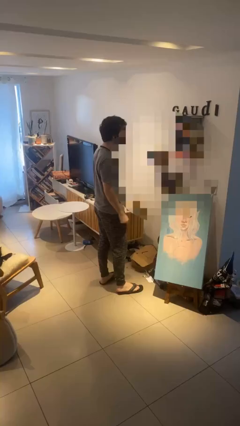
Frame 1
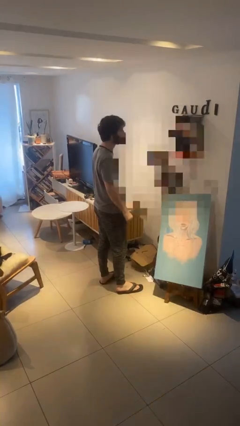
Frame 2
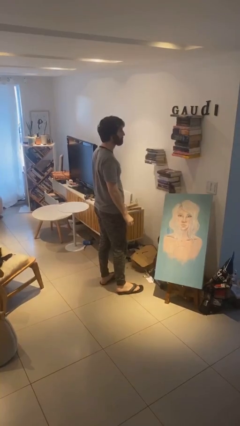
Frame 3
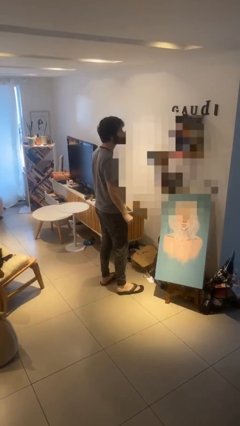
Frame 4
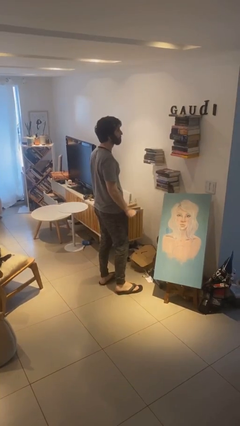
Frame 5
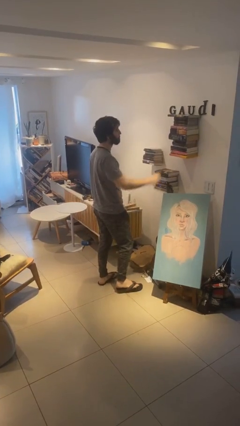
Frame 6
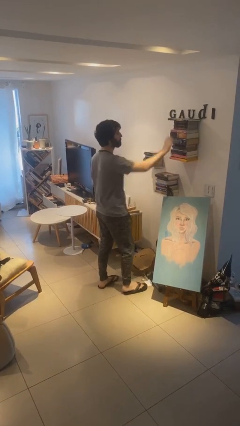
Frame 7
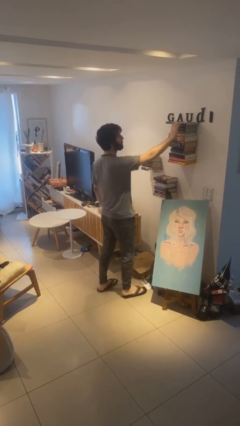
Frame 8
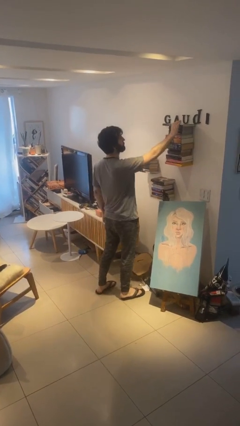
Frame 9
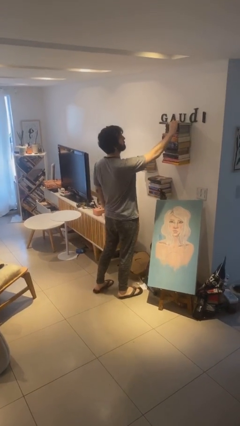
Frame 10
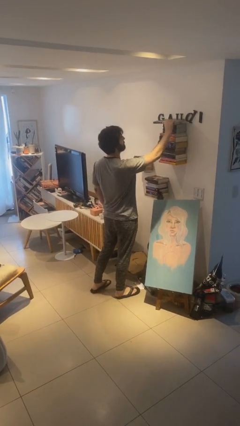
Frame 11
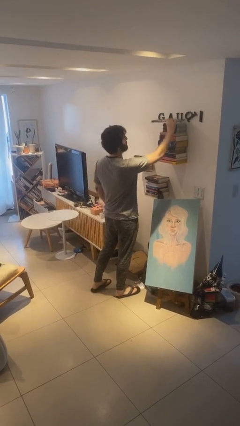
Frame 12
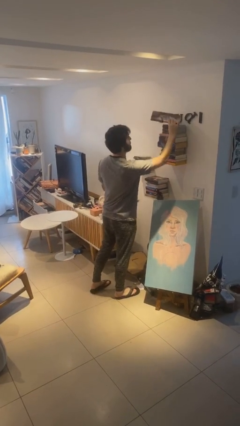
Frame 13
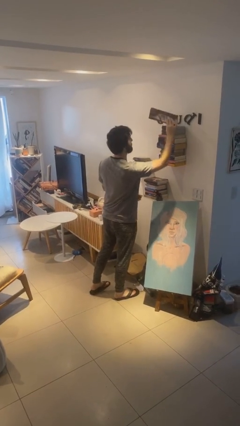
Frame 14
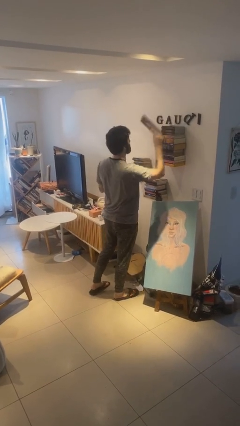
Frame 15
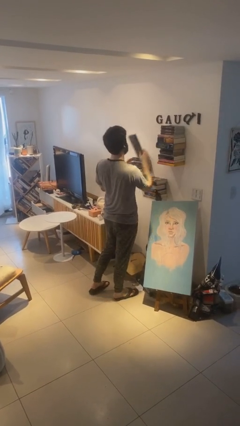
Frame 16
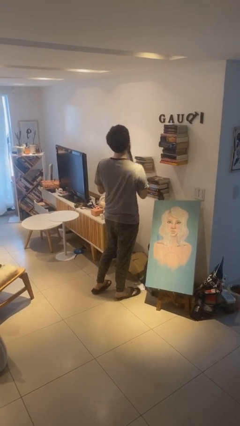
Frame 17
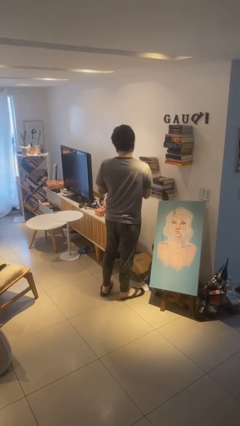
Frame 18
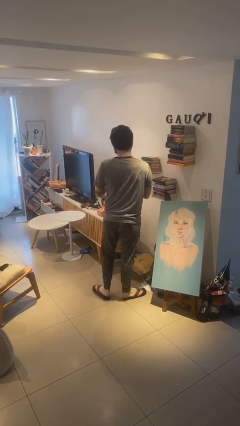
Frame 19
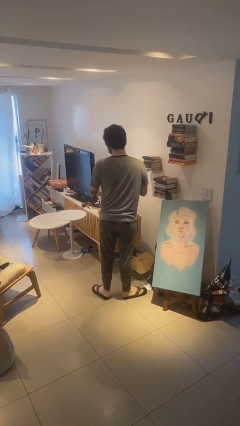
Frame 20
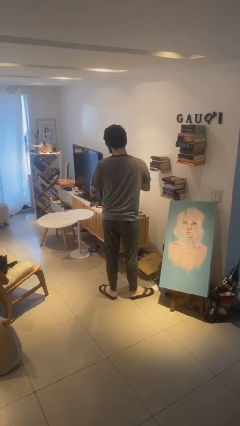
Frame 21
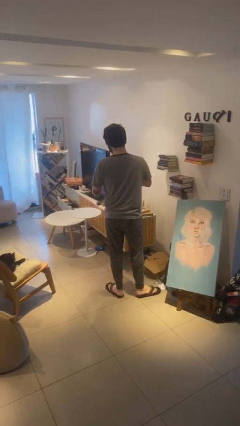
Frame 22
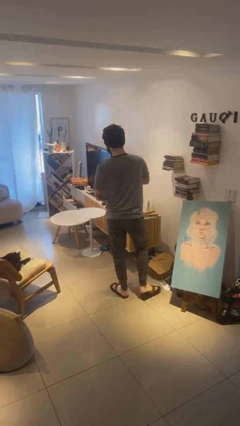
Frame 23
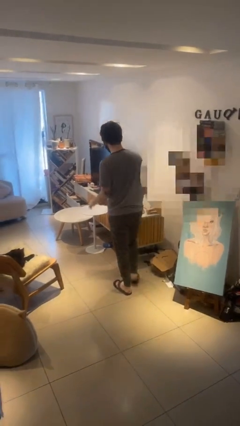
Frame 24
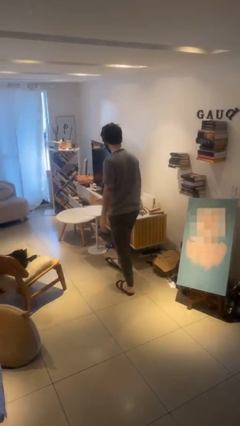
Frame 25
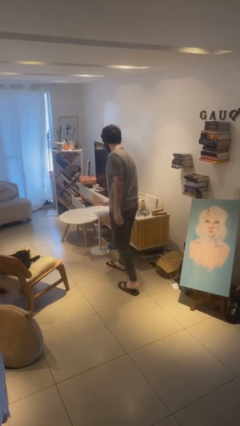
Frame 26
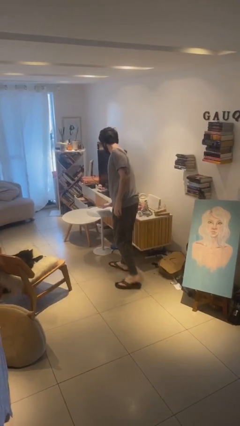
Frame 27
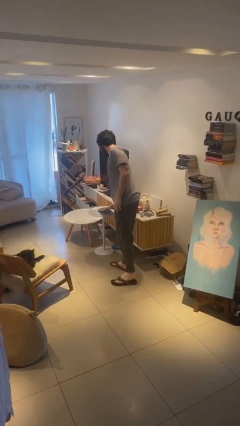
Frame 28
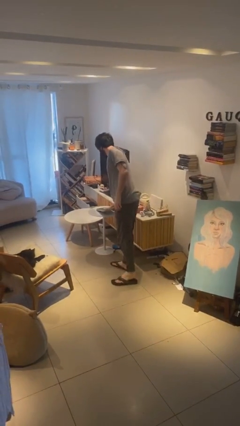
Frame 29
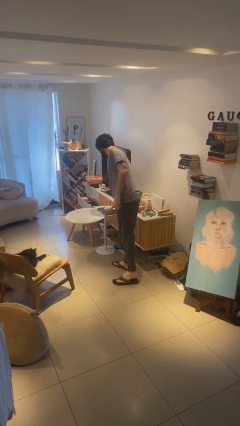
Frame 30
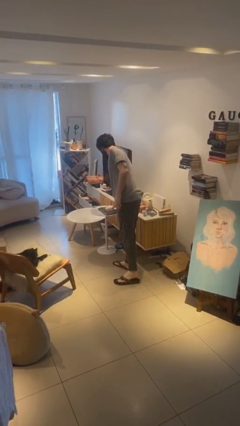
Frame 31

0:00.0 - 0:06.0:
person picks up object from shelf

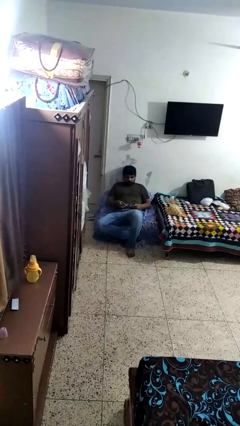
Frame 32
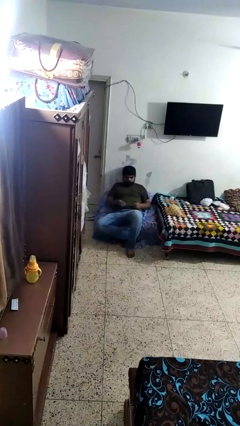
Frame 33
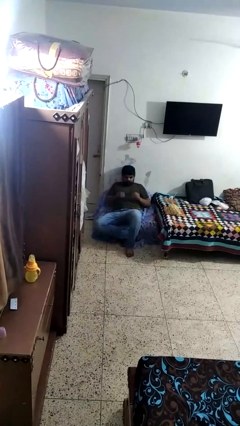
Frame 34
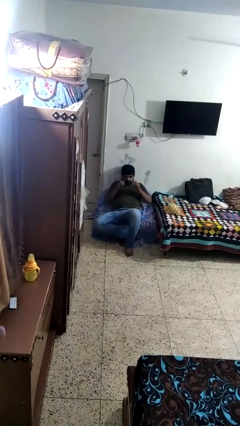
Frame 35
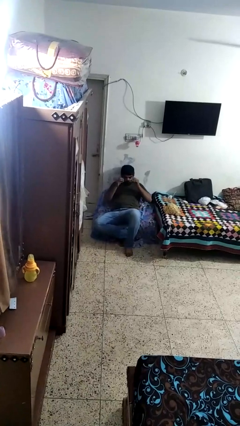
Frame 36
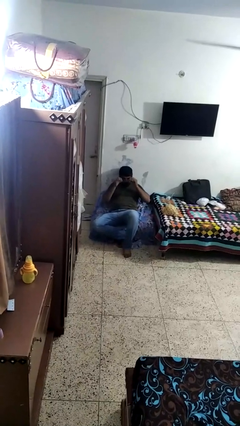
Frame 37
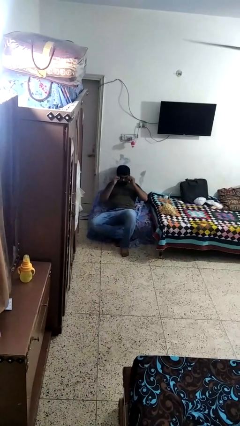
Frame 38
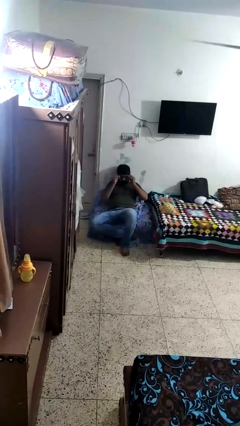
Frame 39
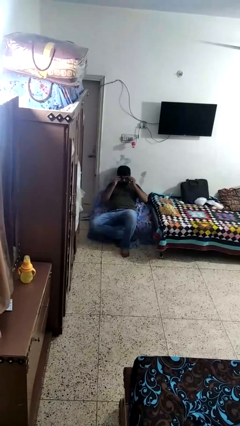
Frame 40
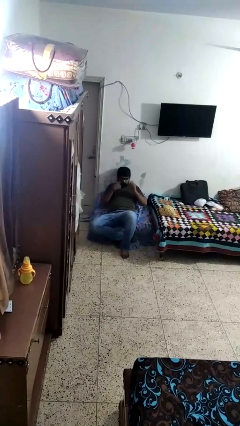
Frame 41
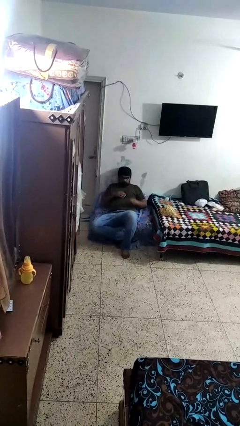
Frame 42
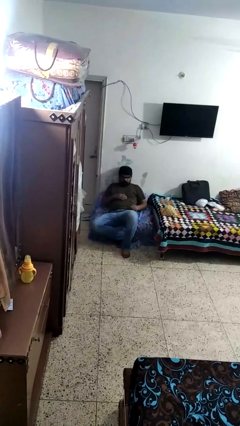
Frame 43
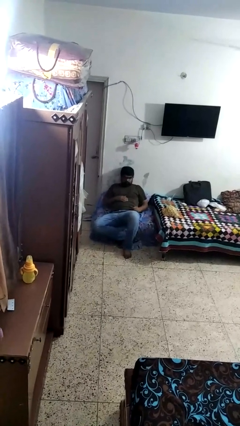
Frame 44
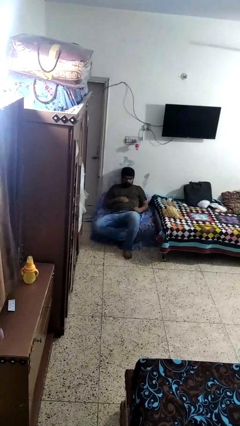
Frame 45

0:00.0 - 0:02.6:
person puts on glasses

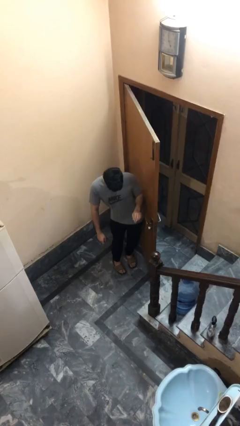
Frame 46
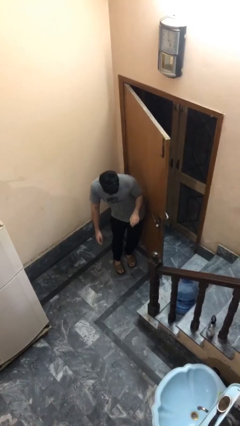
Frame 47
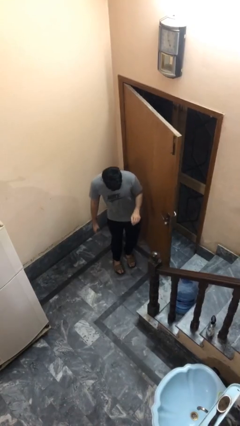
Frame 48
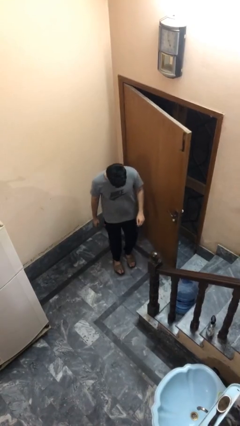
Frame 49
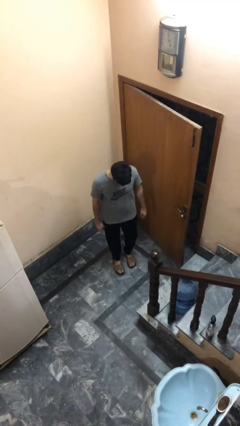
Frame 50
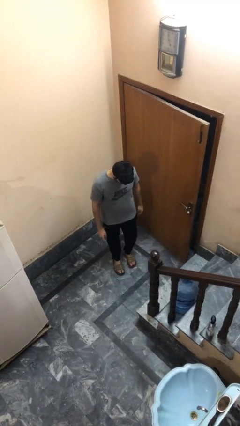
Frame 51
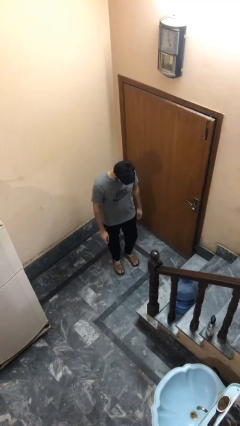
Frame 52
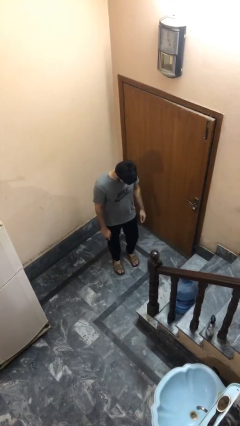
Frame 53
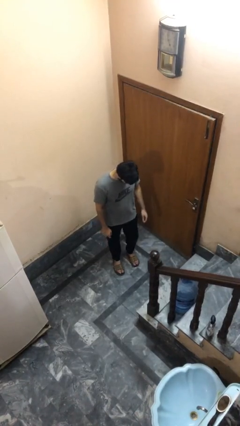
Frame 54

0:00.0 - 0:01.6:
person closes door with hip

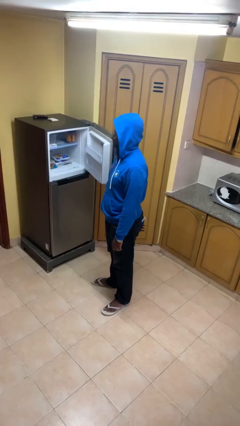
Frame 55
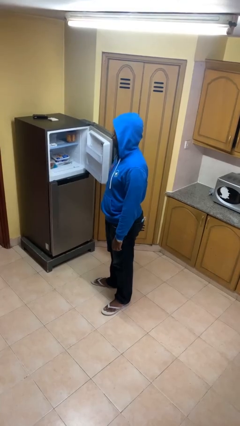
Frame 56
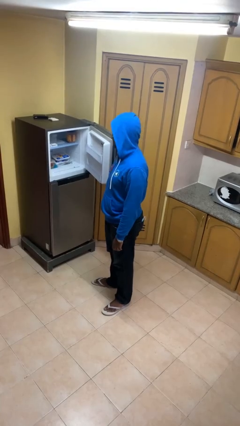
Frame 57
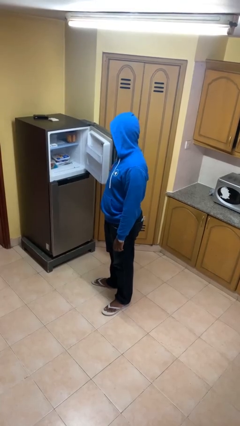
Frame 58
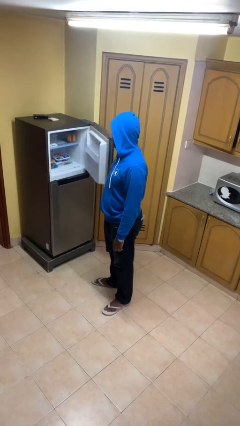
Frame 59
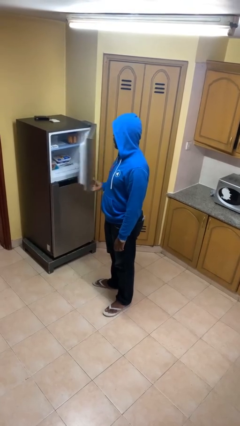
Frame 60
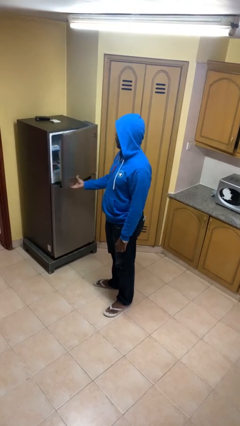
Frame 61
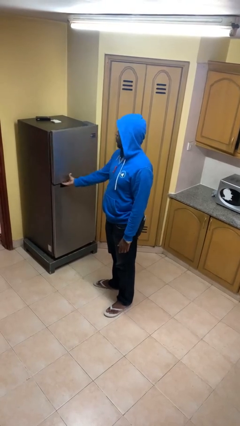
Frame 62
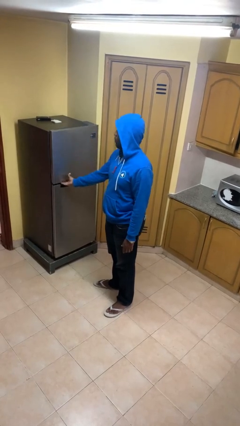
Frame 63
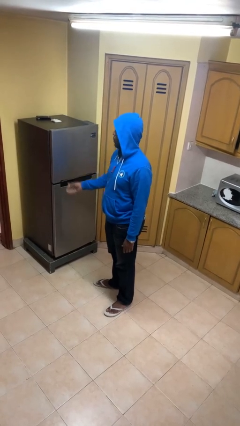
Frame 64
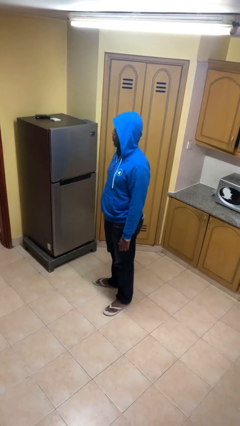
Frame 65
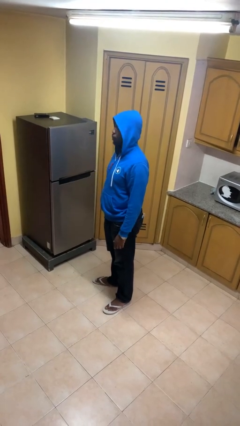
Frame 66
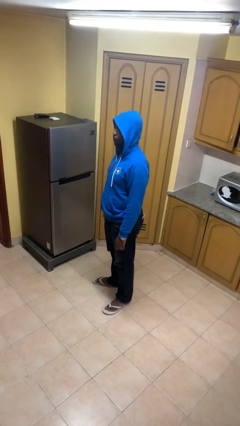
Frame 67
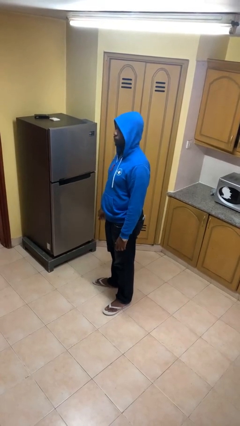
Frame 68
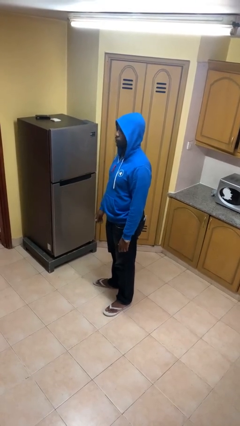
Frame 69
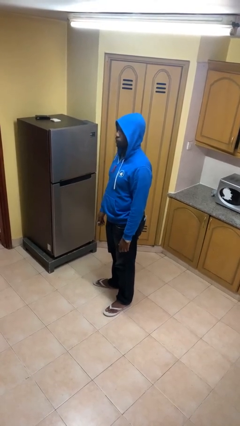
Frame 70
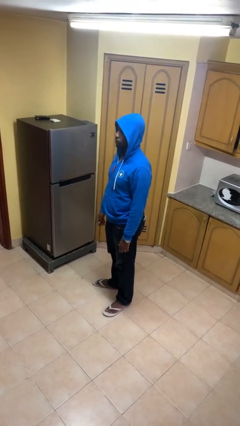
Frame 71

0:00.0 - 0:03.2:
person closes refrigerator

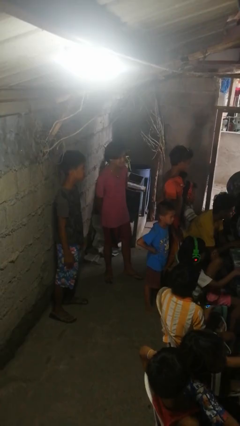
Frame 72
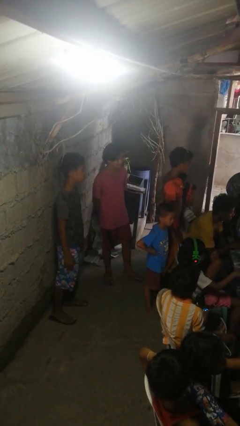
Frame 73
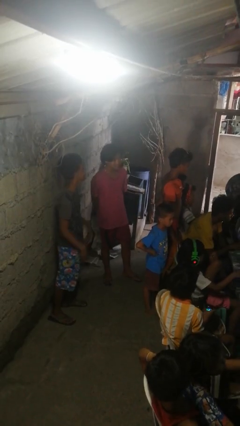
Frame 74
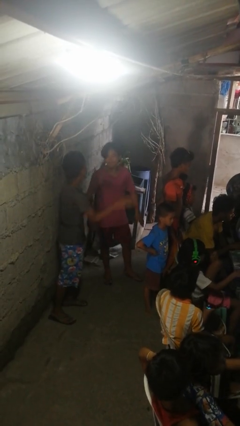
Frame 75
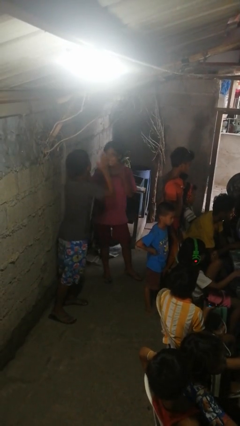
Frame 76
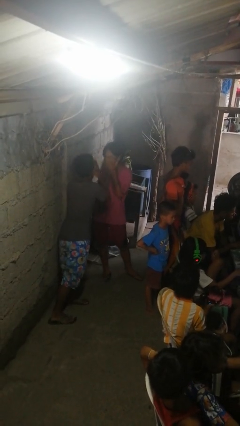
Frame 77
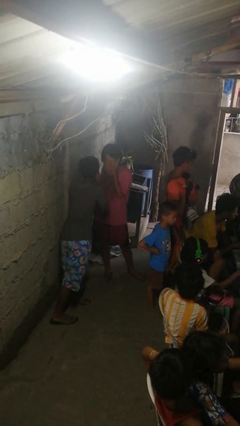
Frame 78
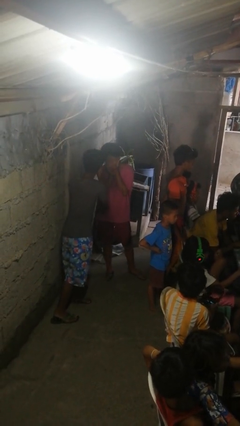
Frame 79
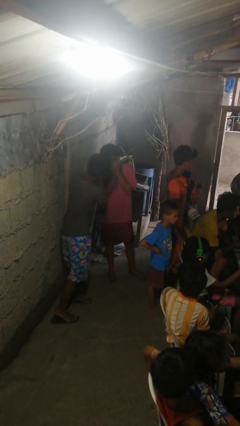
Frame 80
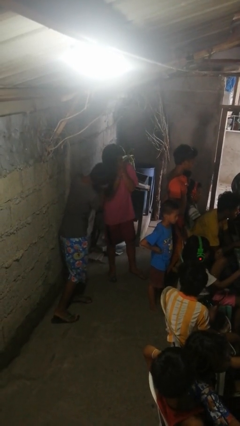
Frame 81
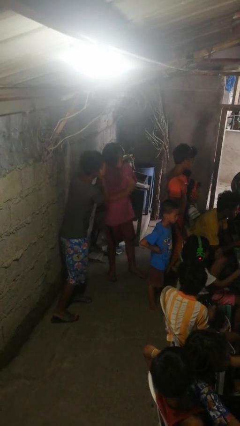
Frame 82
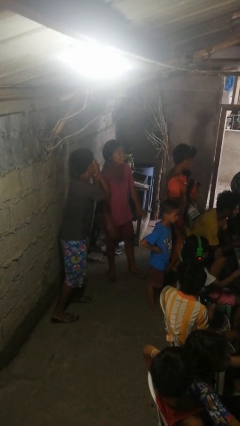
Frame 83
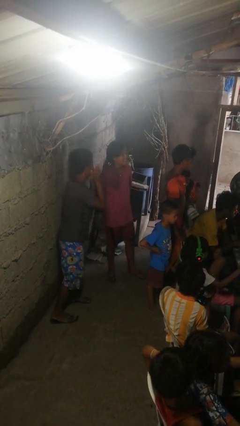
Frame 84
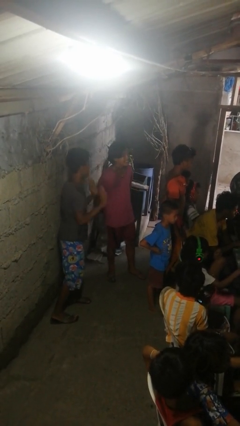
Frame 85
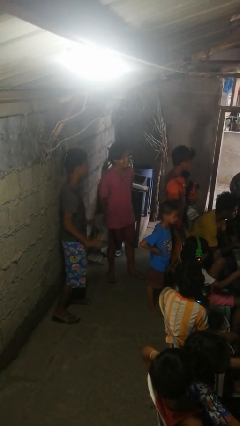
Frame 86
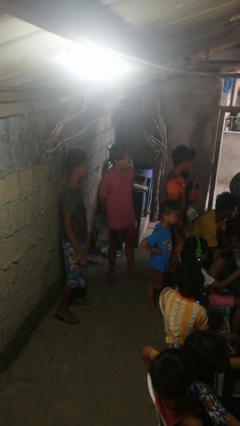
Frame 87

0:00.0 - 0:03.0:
person laughs with person

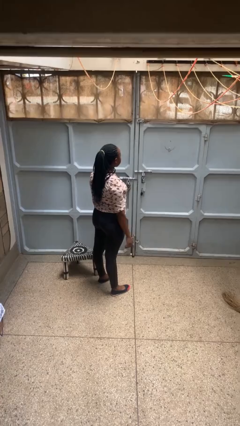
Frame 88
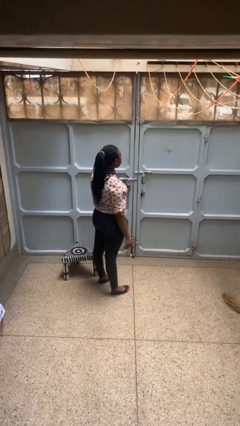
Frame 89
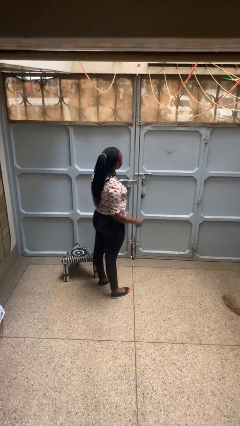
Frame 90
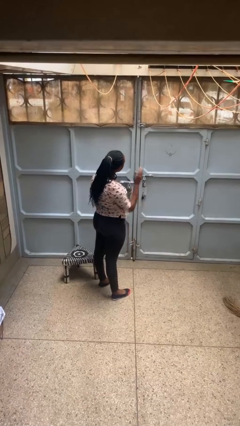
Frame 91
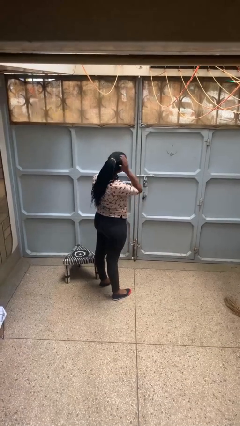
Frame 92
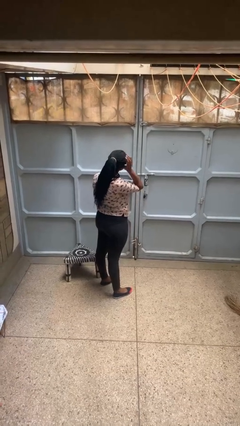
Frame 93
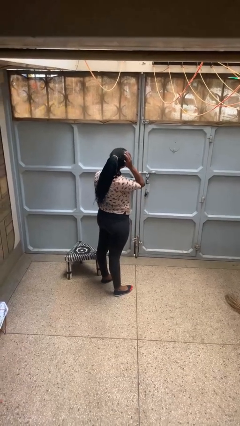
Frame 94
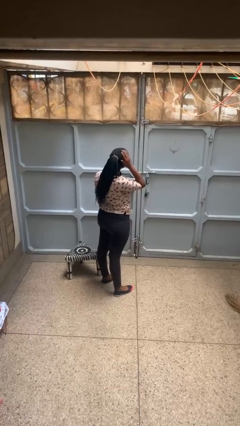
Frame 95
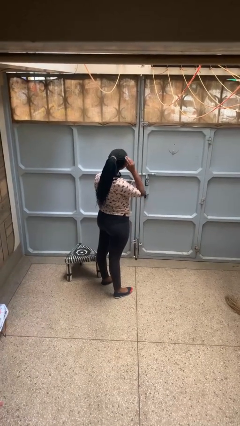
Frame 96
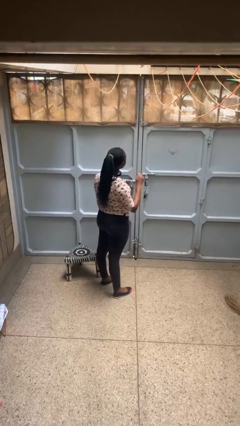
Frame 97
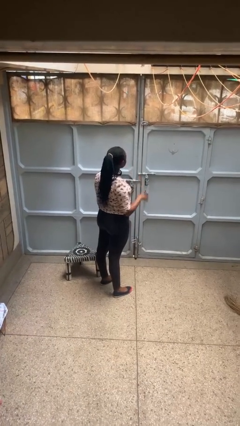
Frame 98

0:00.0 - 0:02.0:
person pats head
